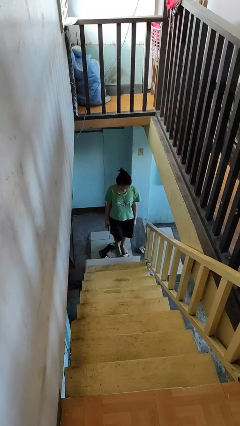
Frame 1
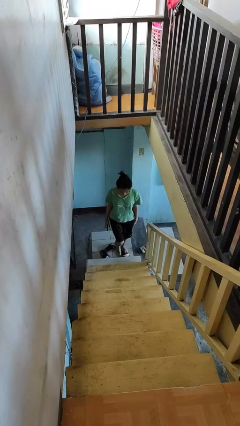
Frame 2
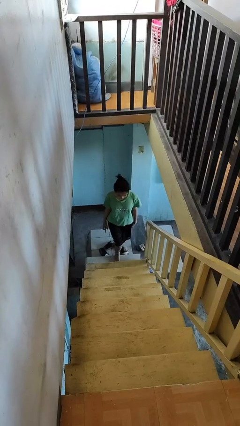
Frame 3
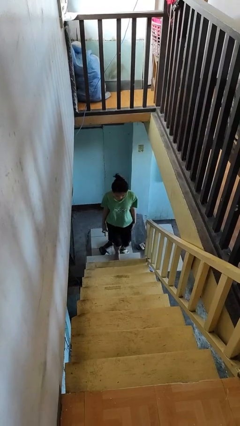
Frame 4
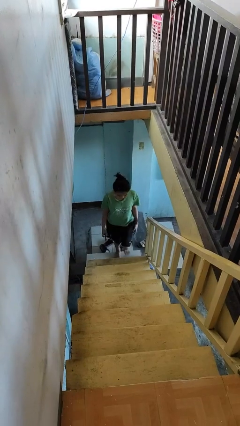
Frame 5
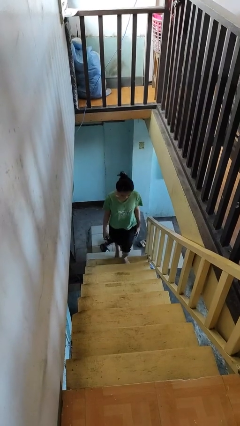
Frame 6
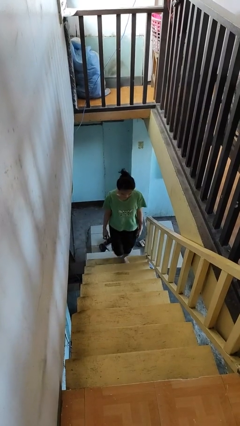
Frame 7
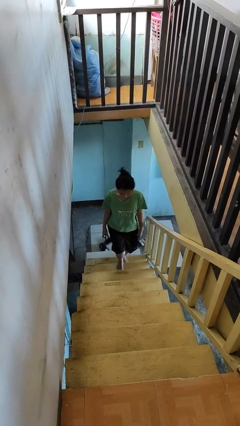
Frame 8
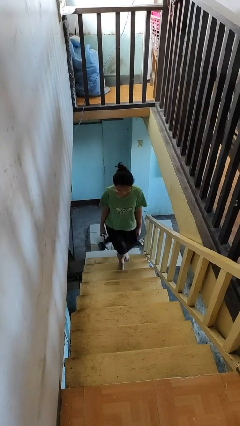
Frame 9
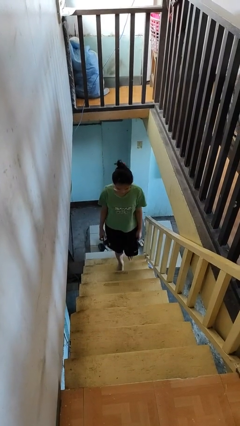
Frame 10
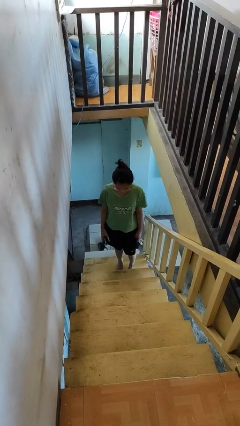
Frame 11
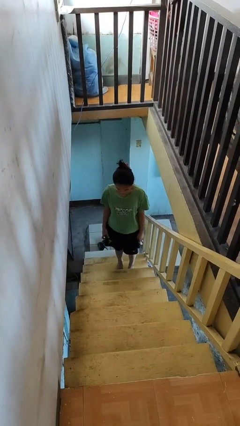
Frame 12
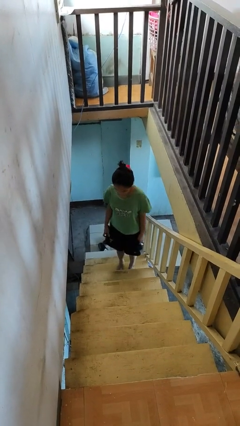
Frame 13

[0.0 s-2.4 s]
person climbs up stairs

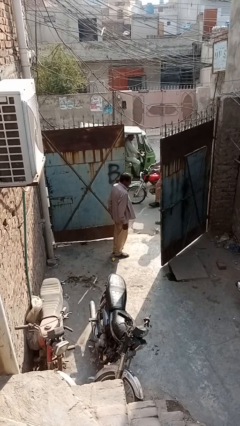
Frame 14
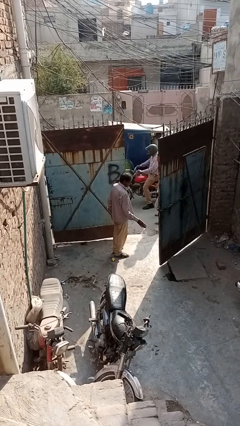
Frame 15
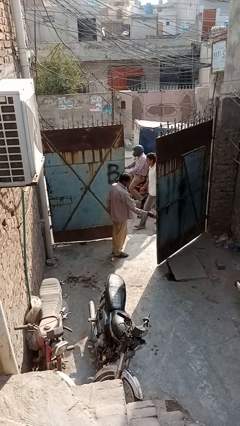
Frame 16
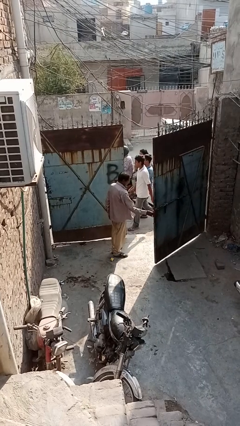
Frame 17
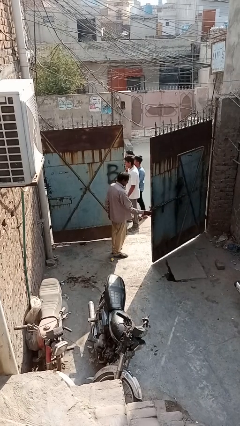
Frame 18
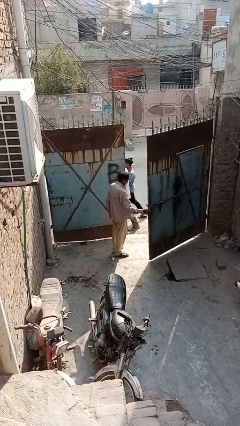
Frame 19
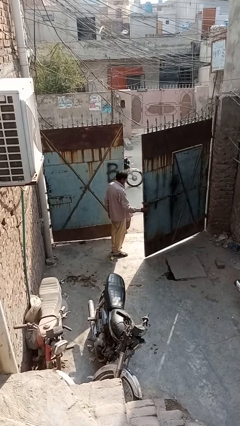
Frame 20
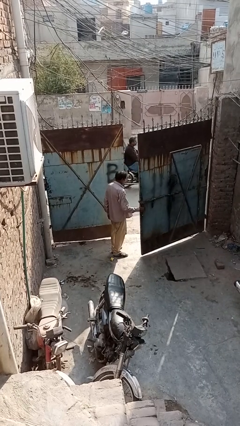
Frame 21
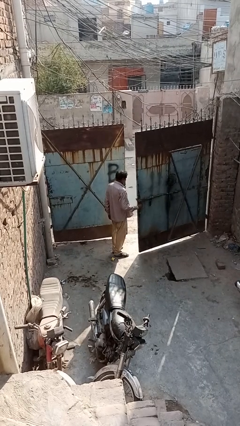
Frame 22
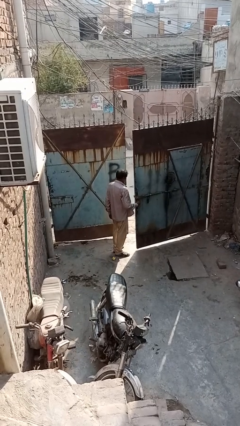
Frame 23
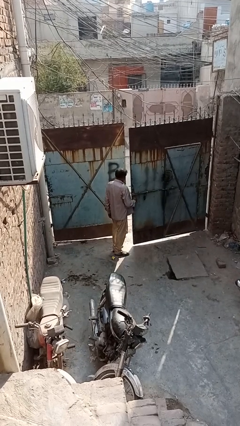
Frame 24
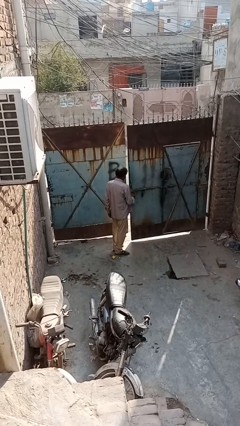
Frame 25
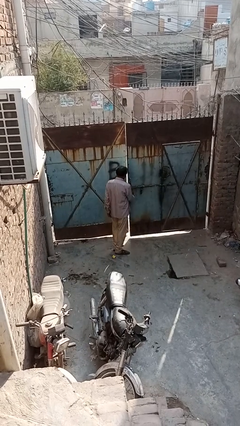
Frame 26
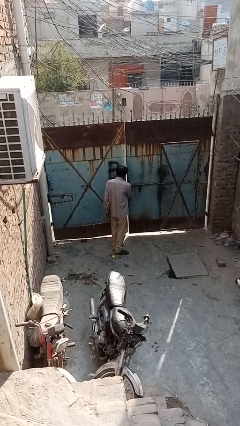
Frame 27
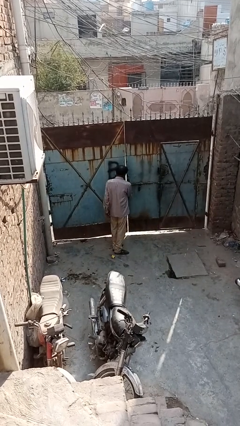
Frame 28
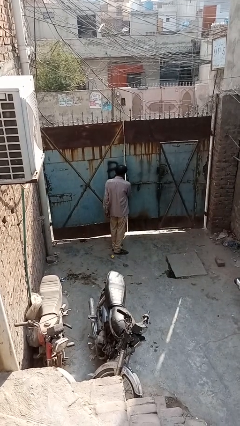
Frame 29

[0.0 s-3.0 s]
person closes gate

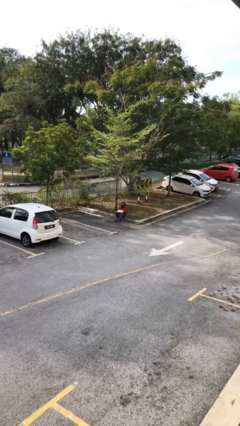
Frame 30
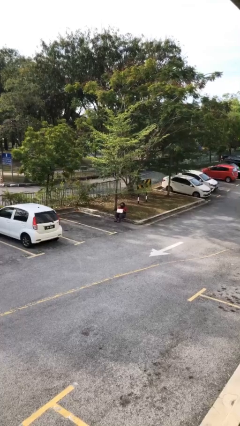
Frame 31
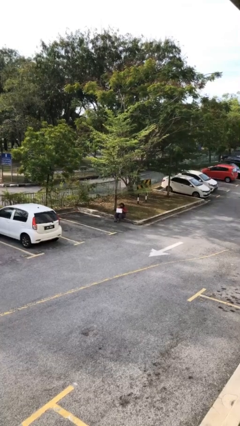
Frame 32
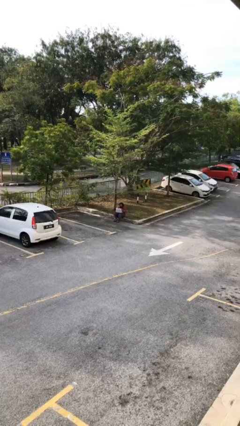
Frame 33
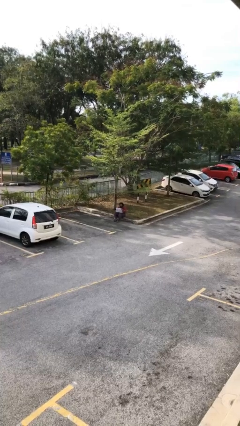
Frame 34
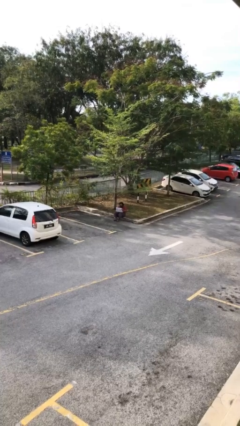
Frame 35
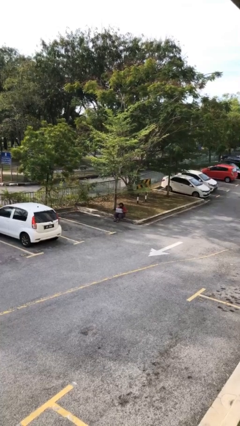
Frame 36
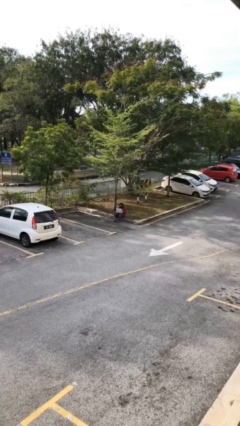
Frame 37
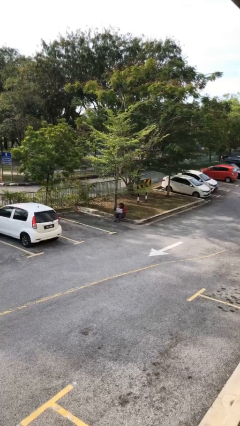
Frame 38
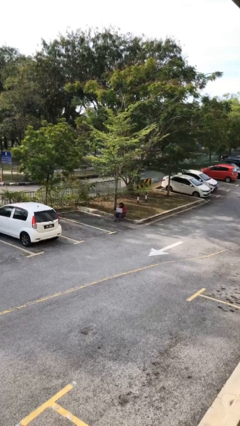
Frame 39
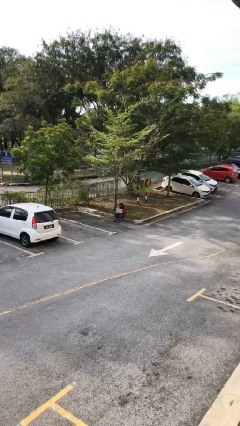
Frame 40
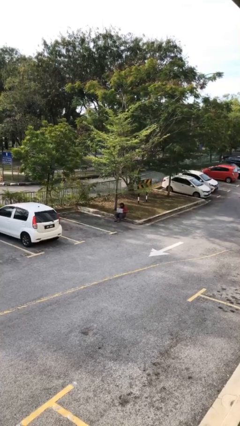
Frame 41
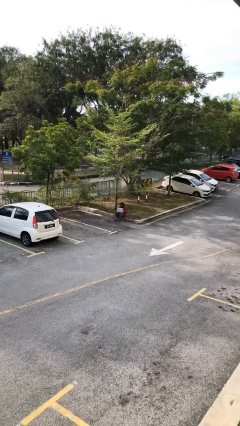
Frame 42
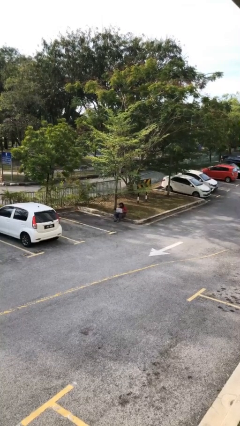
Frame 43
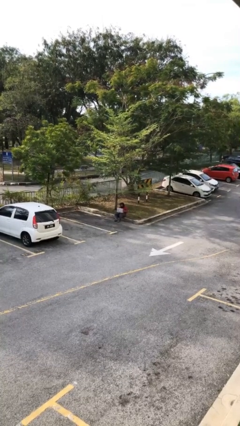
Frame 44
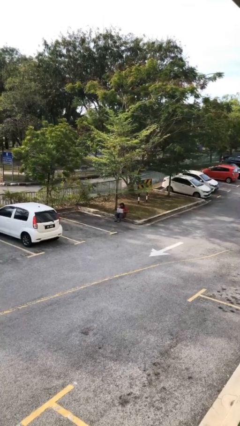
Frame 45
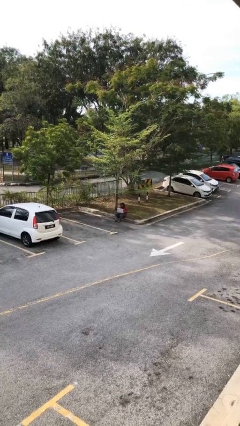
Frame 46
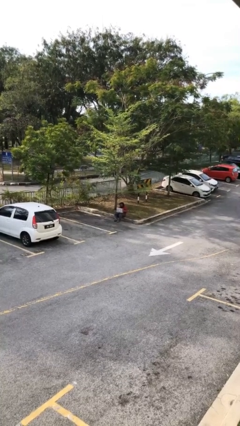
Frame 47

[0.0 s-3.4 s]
person interacts with laptop

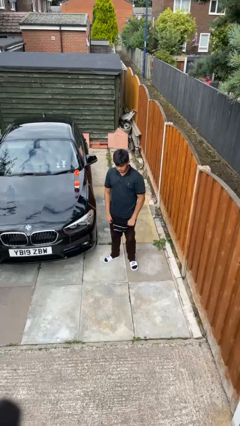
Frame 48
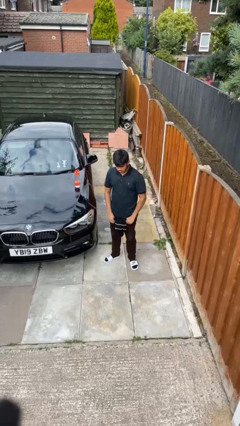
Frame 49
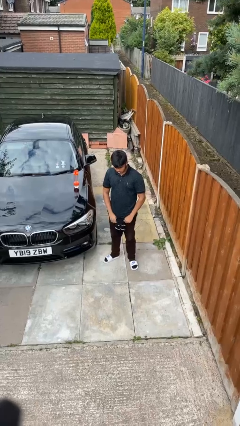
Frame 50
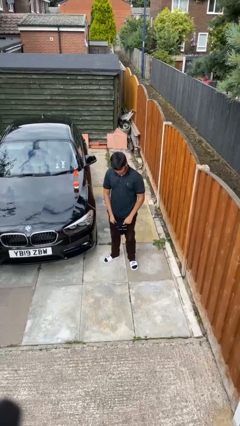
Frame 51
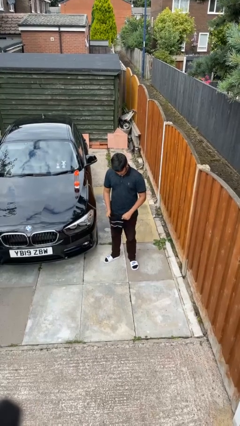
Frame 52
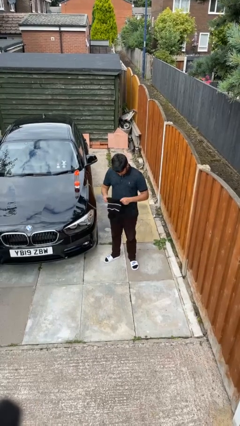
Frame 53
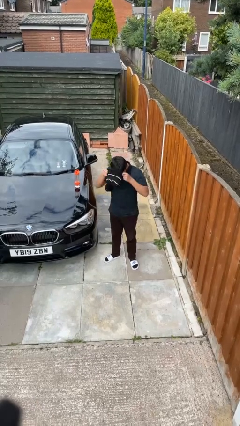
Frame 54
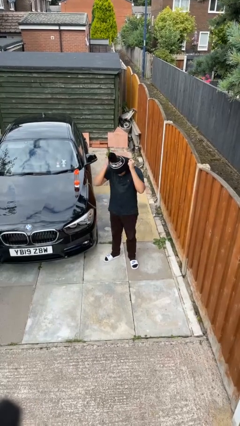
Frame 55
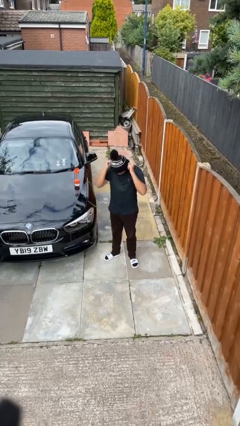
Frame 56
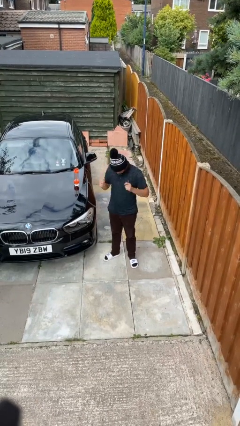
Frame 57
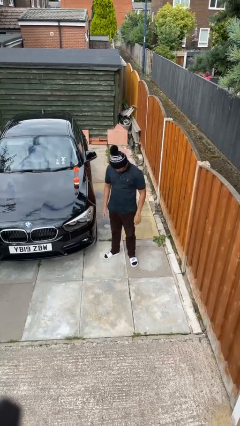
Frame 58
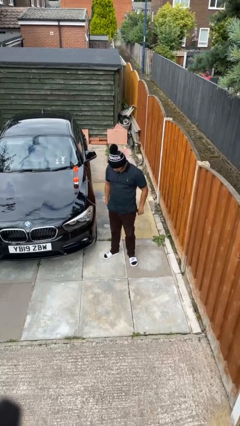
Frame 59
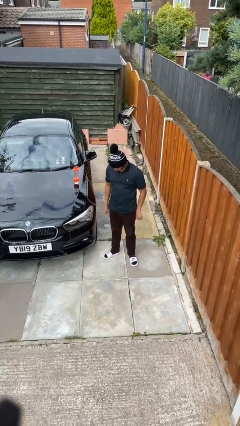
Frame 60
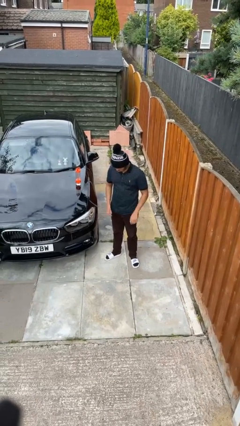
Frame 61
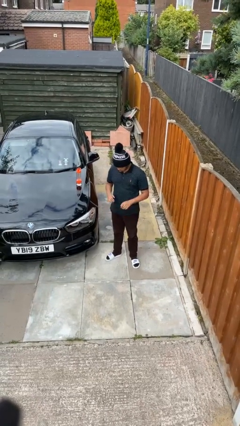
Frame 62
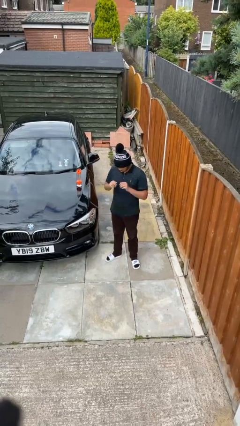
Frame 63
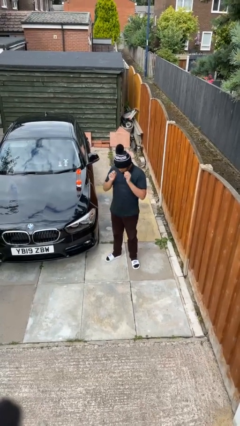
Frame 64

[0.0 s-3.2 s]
person puts on hat

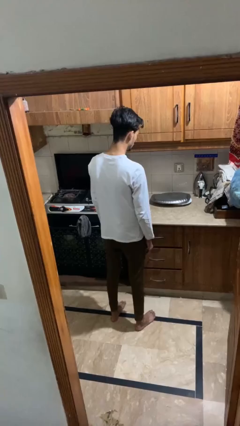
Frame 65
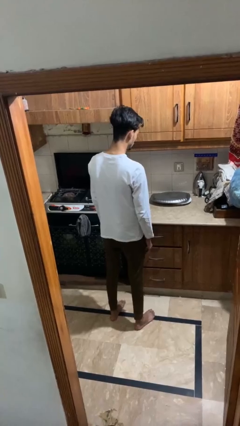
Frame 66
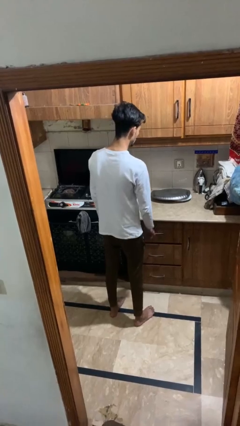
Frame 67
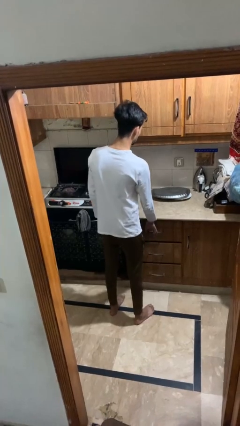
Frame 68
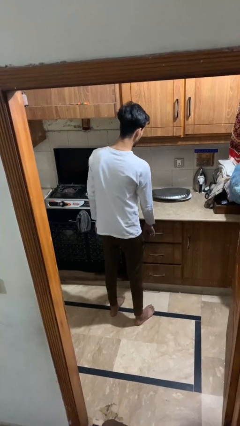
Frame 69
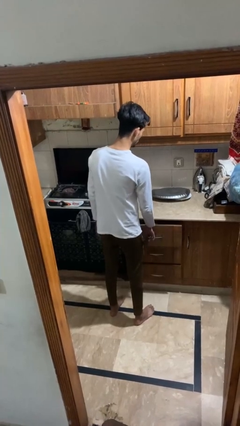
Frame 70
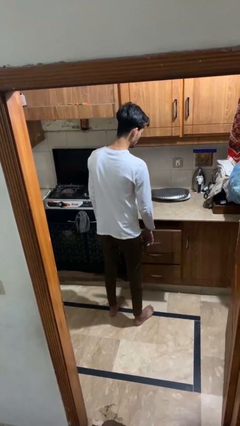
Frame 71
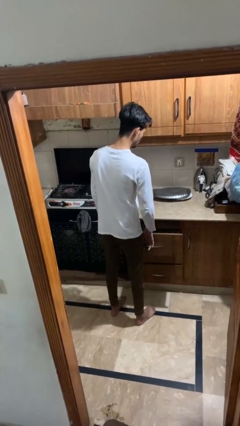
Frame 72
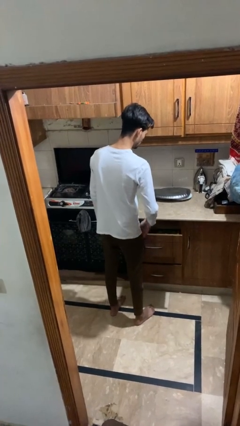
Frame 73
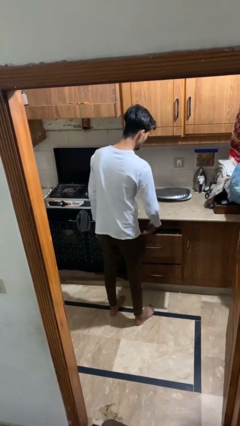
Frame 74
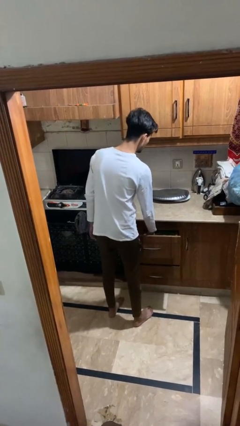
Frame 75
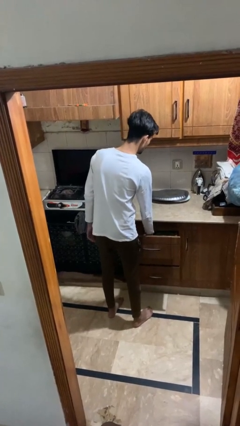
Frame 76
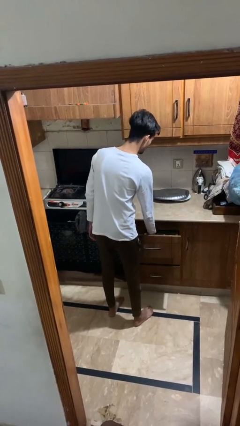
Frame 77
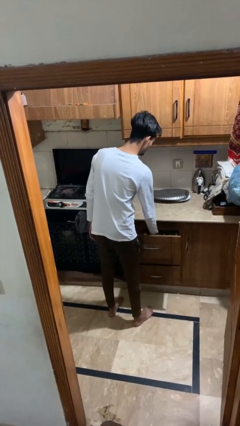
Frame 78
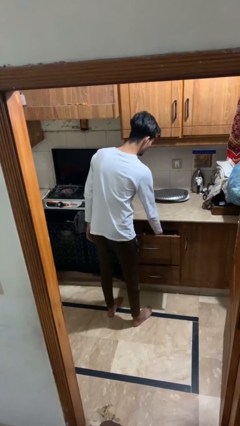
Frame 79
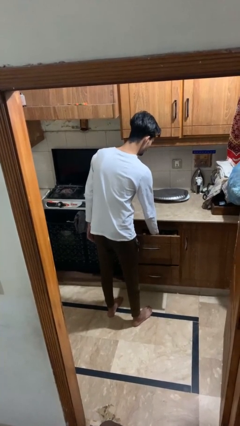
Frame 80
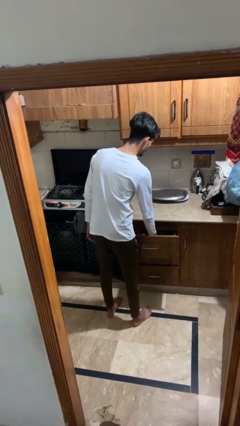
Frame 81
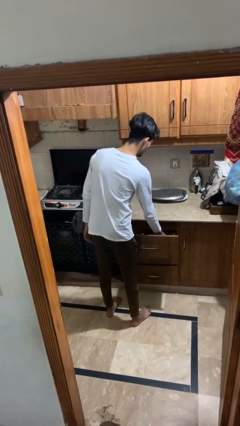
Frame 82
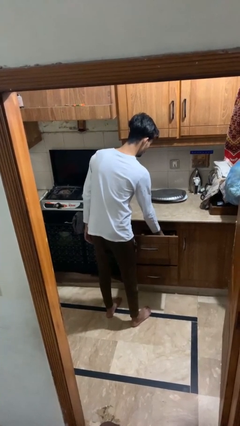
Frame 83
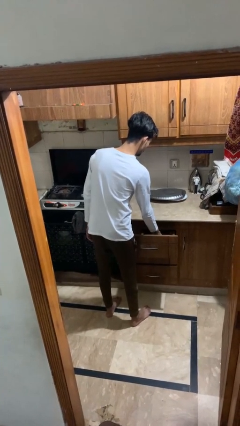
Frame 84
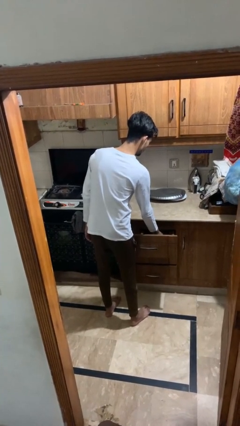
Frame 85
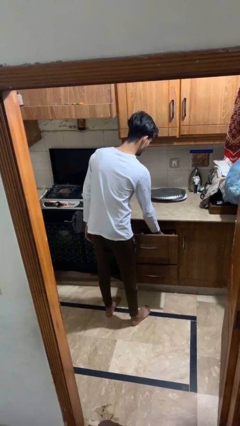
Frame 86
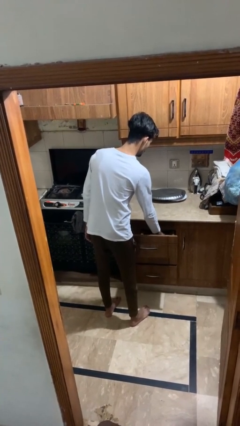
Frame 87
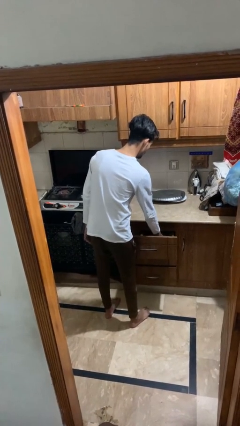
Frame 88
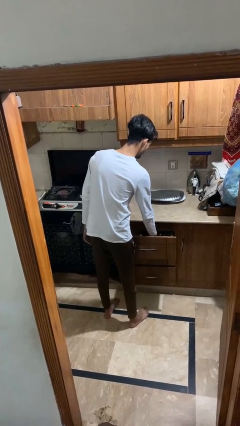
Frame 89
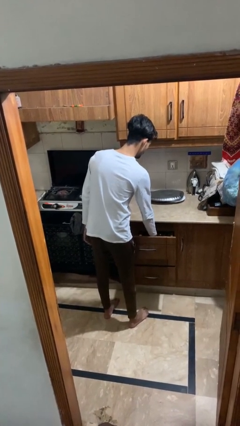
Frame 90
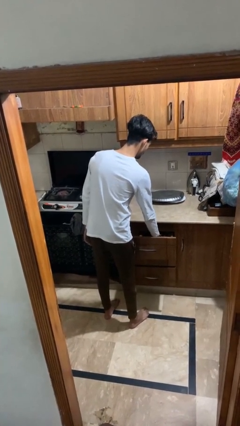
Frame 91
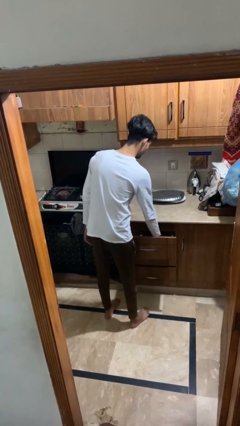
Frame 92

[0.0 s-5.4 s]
person searches in kitchen drawer

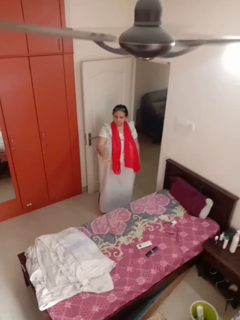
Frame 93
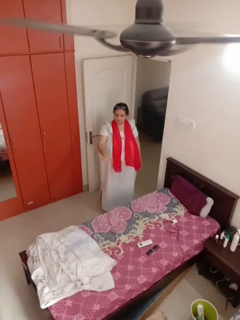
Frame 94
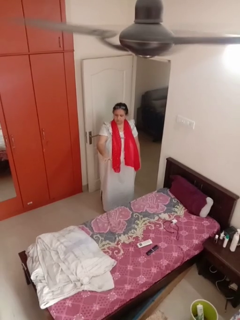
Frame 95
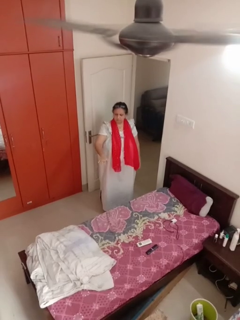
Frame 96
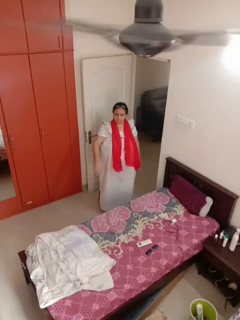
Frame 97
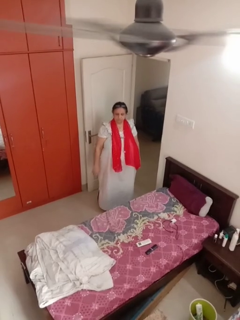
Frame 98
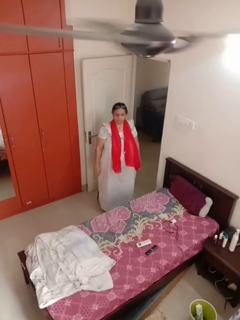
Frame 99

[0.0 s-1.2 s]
person gestures swipe down
